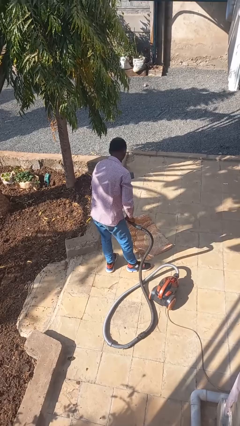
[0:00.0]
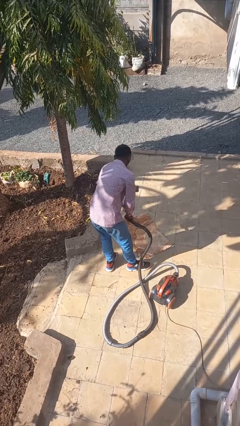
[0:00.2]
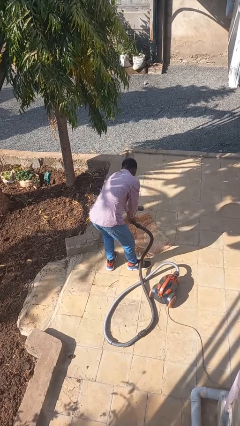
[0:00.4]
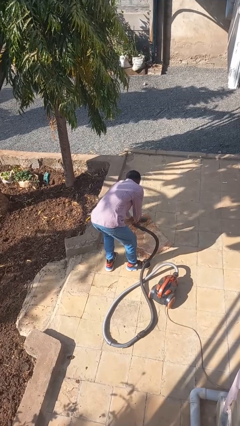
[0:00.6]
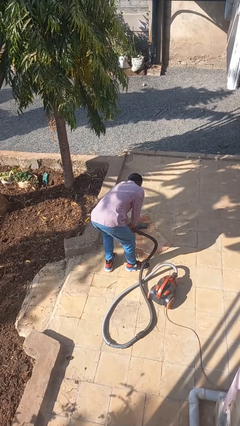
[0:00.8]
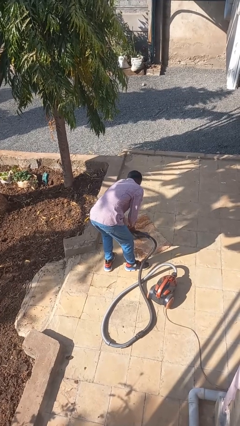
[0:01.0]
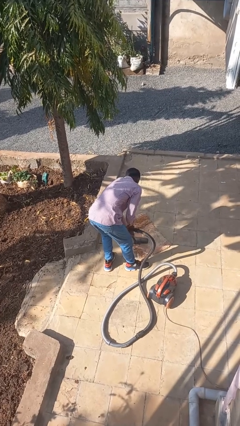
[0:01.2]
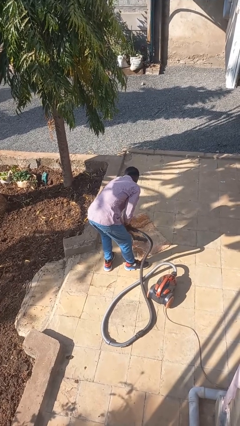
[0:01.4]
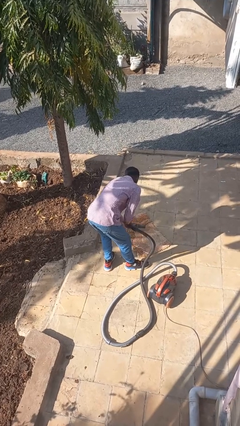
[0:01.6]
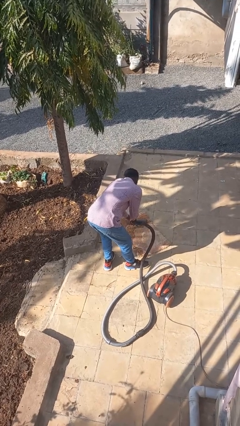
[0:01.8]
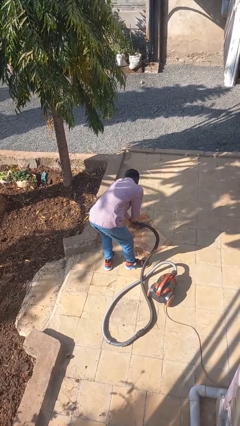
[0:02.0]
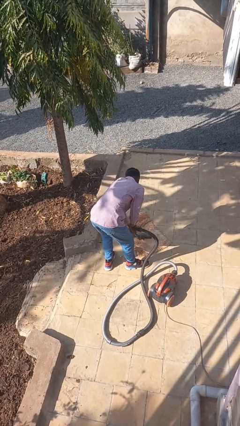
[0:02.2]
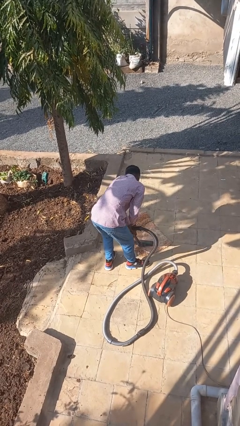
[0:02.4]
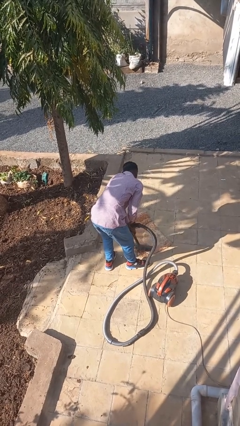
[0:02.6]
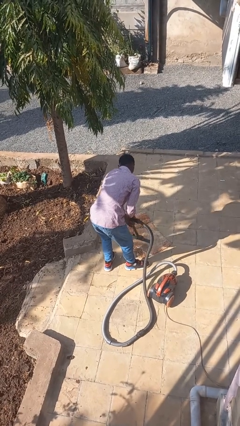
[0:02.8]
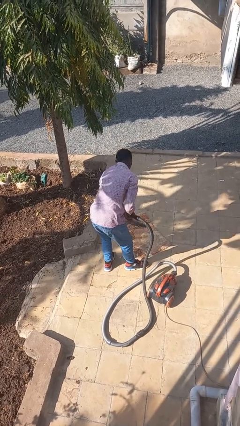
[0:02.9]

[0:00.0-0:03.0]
person vacuums carpet

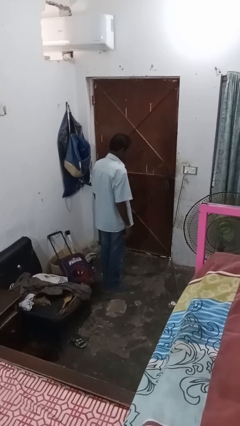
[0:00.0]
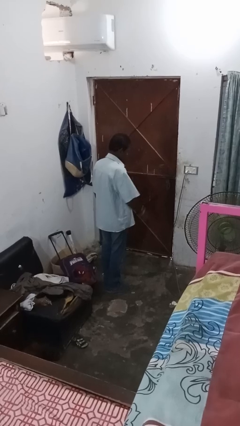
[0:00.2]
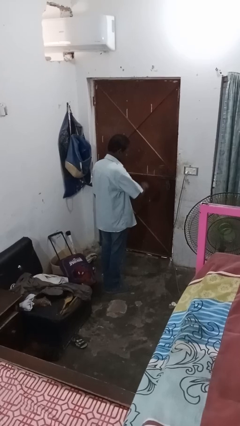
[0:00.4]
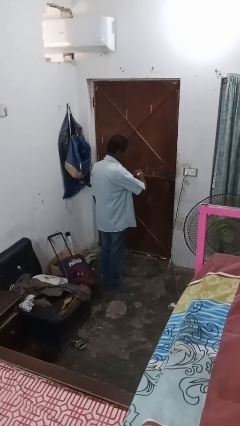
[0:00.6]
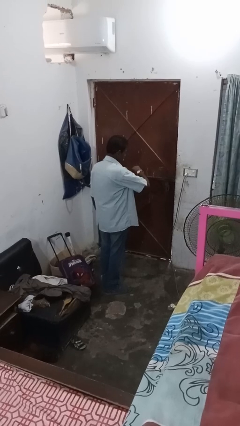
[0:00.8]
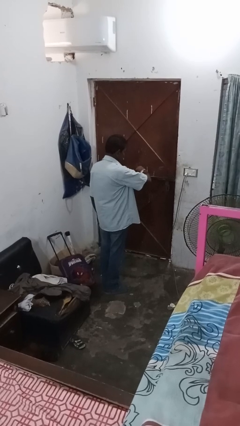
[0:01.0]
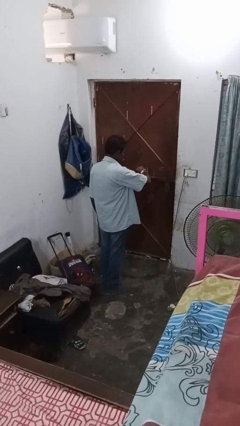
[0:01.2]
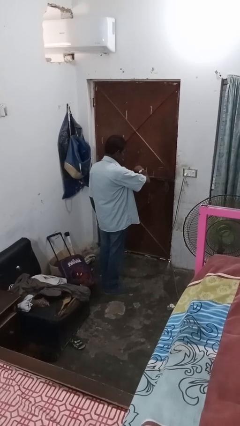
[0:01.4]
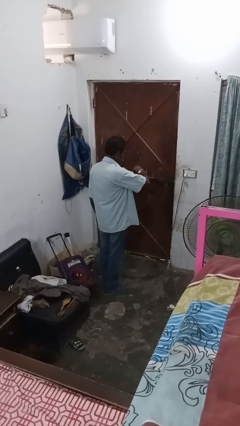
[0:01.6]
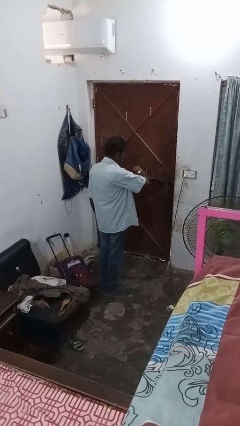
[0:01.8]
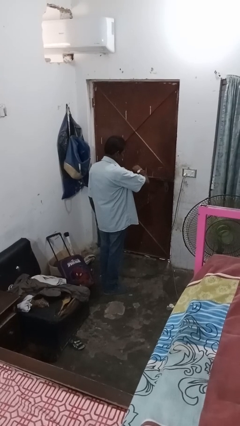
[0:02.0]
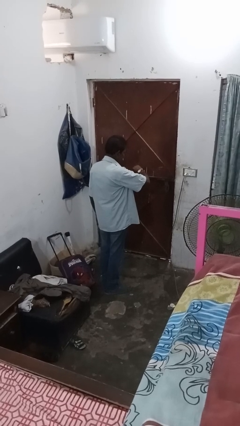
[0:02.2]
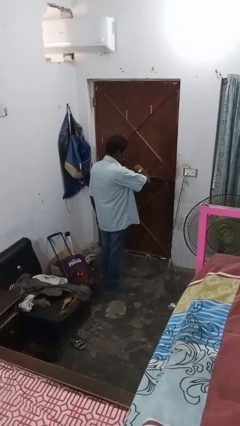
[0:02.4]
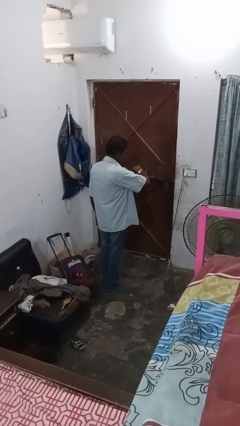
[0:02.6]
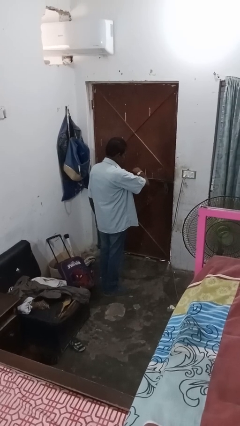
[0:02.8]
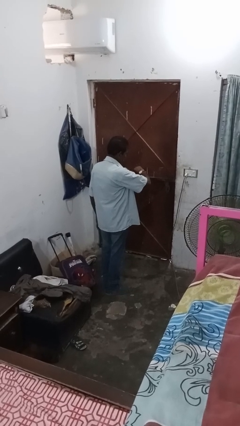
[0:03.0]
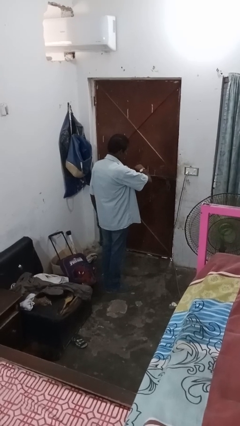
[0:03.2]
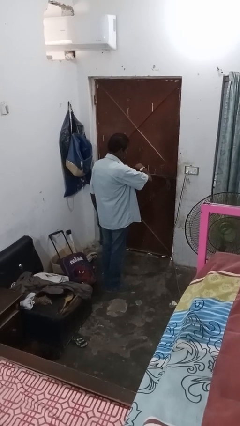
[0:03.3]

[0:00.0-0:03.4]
person puts on wristwatch

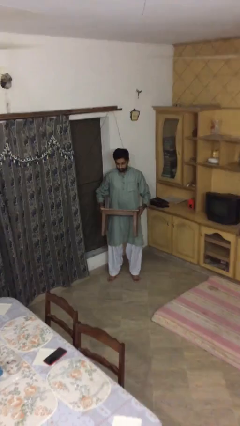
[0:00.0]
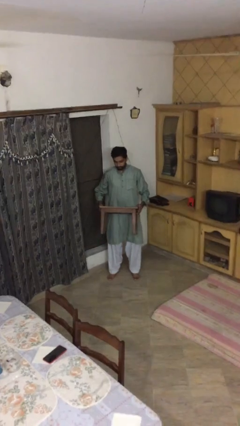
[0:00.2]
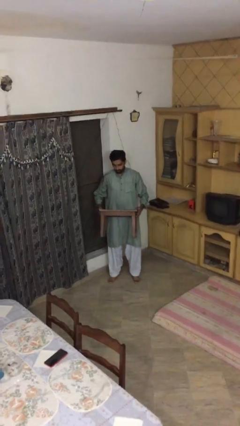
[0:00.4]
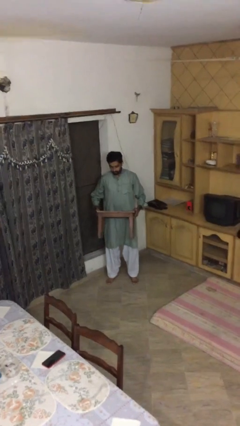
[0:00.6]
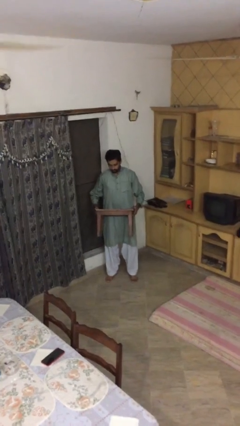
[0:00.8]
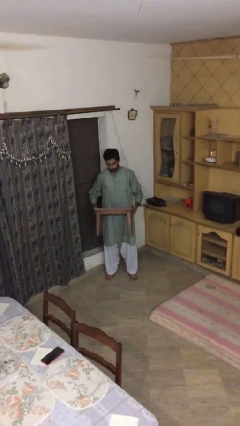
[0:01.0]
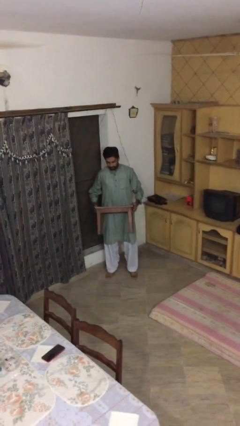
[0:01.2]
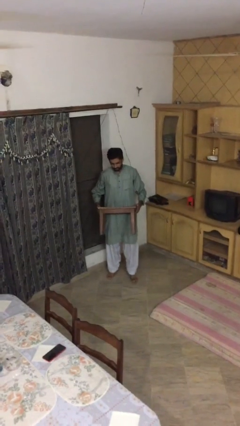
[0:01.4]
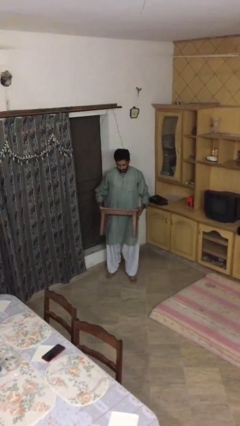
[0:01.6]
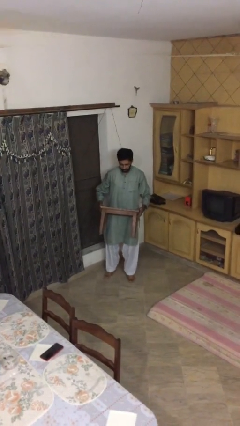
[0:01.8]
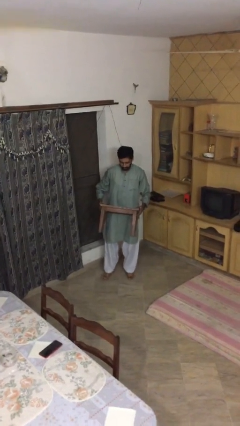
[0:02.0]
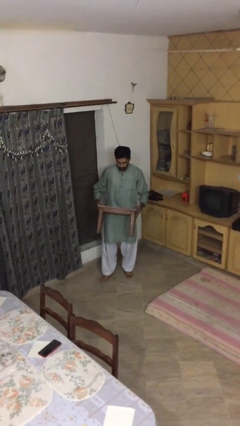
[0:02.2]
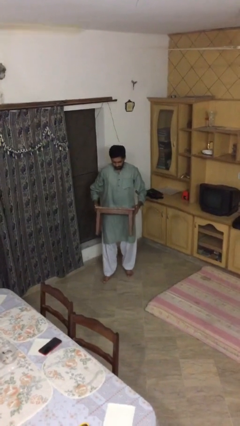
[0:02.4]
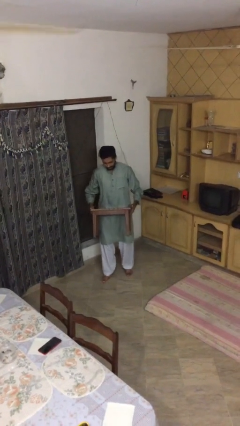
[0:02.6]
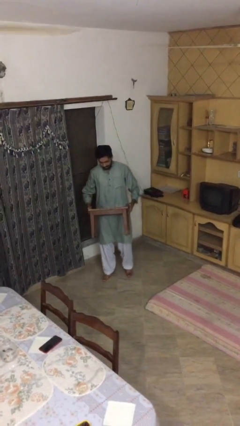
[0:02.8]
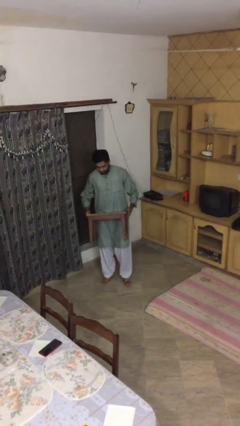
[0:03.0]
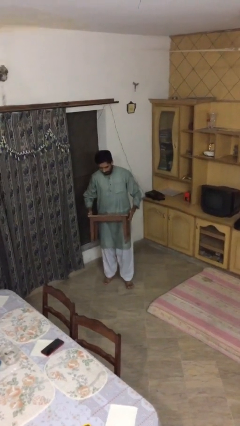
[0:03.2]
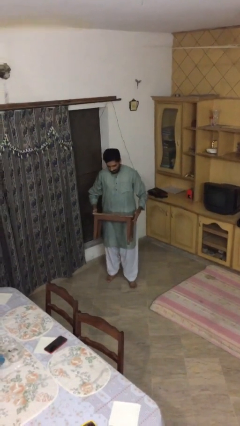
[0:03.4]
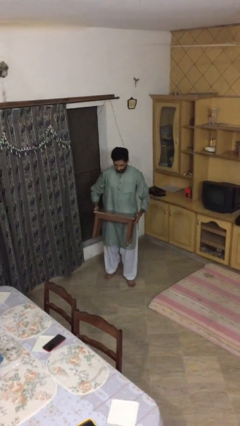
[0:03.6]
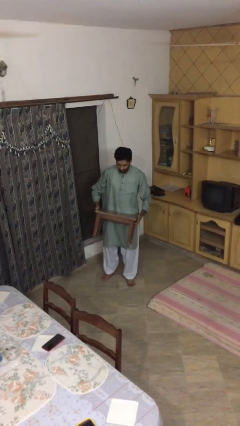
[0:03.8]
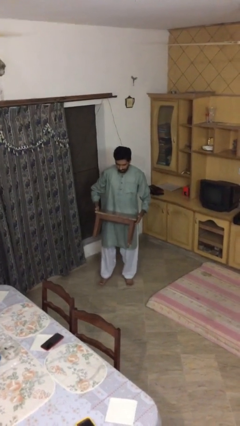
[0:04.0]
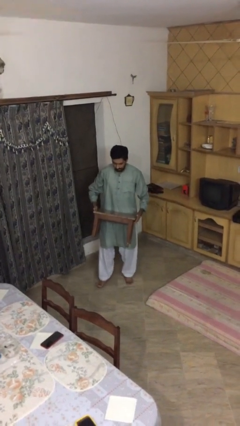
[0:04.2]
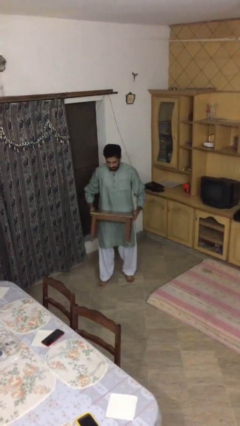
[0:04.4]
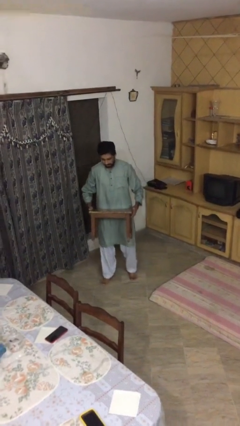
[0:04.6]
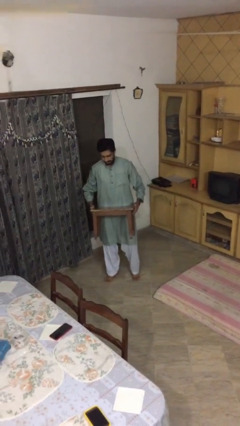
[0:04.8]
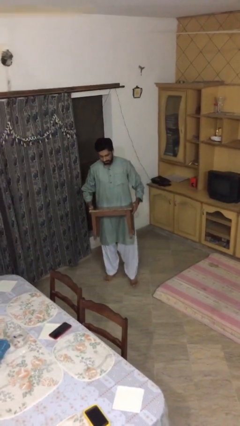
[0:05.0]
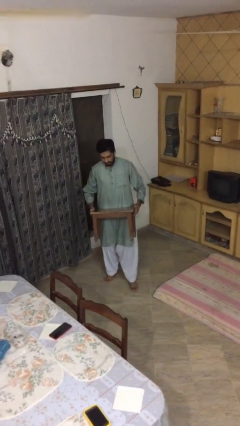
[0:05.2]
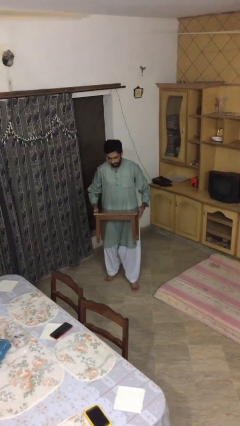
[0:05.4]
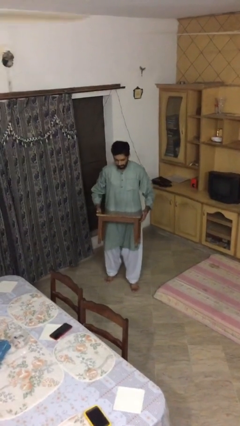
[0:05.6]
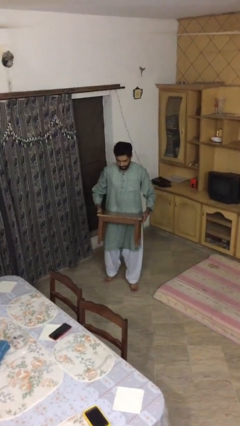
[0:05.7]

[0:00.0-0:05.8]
person carries heavy object

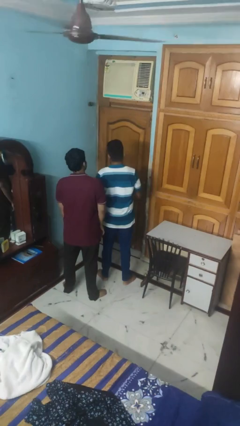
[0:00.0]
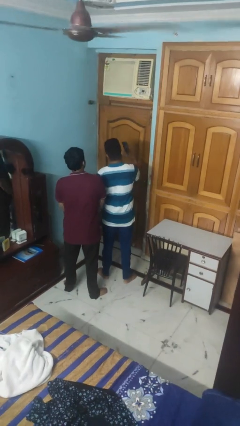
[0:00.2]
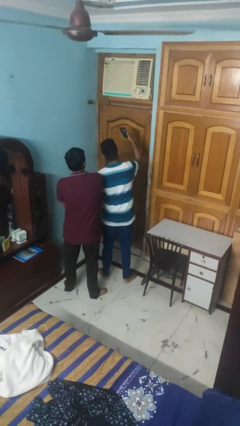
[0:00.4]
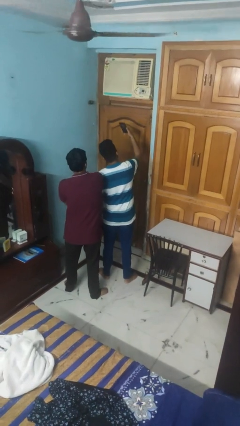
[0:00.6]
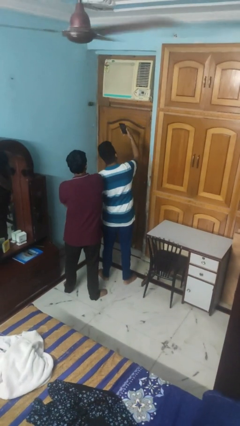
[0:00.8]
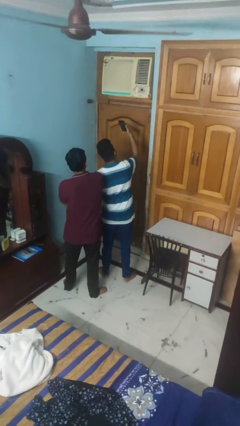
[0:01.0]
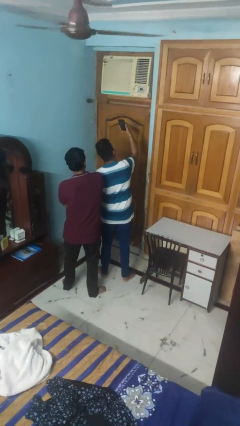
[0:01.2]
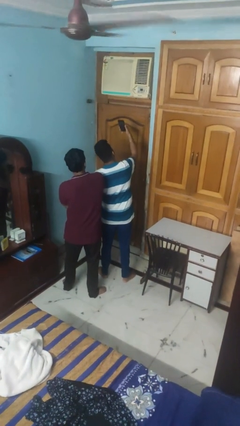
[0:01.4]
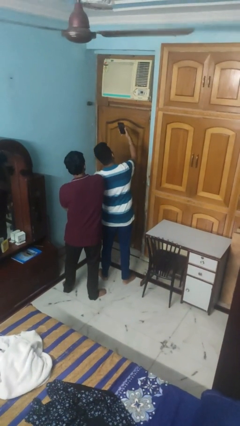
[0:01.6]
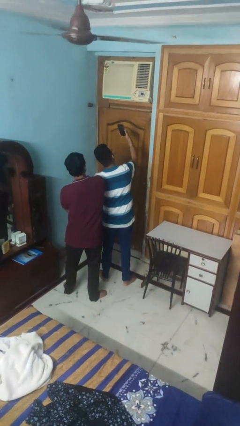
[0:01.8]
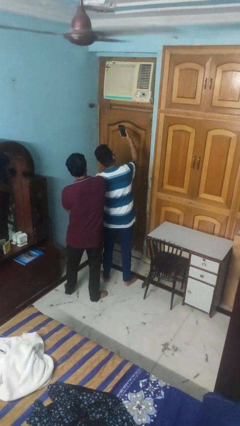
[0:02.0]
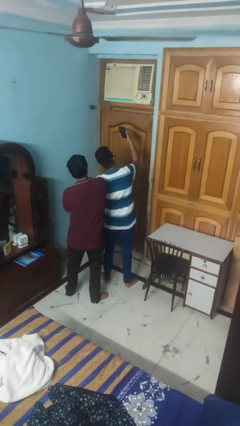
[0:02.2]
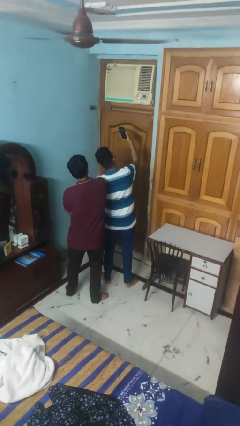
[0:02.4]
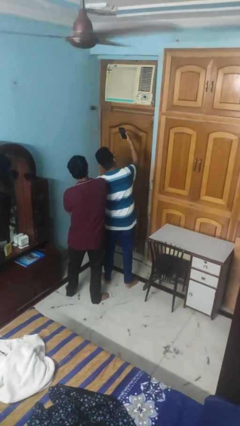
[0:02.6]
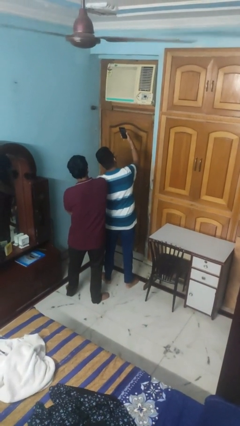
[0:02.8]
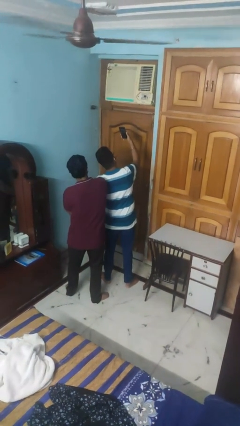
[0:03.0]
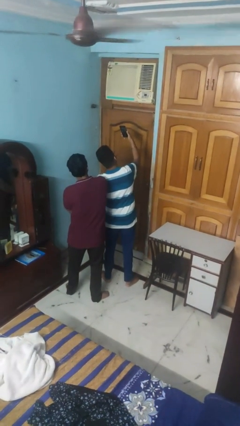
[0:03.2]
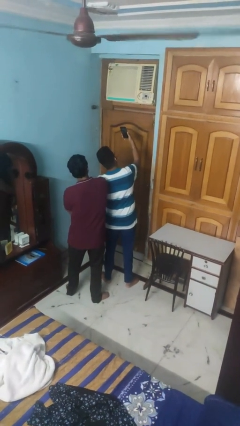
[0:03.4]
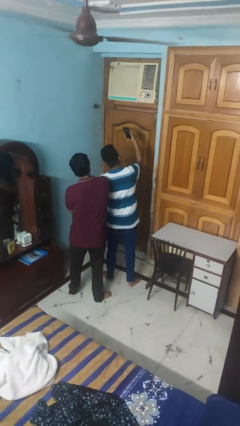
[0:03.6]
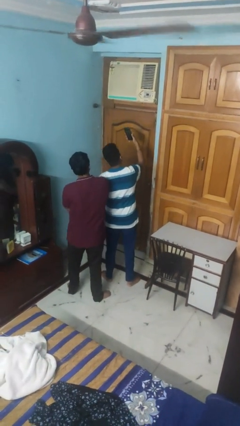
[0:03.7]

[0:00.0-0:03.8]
person takes selfie with person

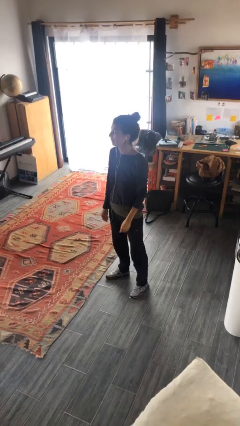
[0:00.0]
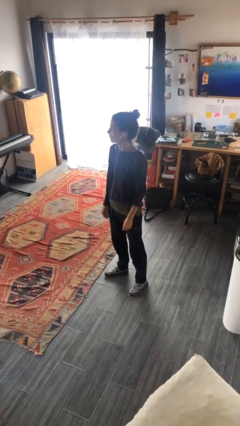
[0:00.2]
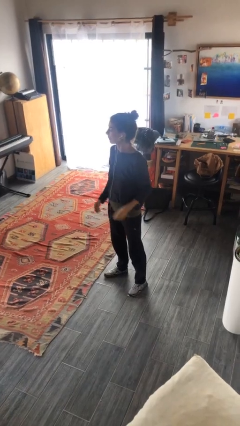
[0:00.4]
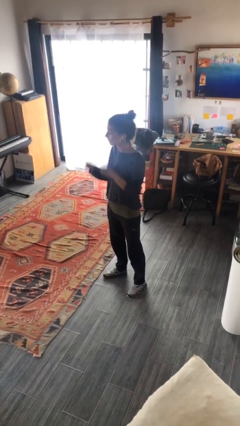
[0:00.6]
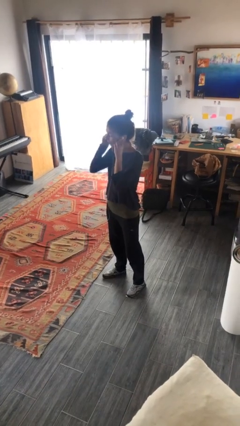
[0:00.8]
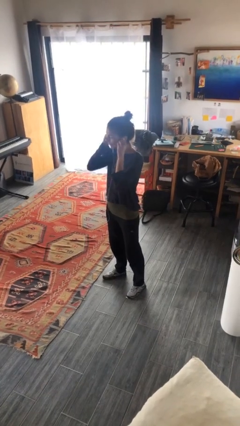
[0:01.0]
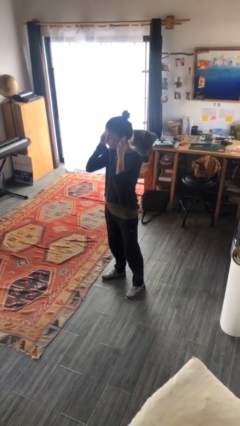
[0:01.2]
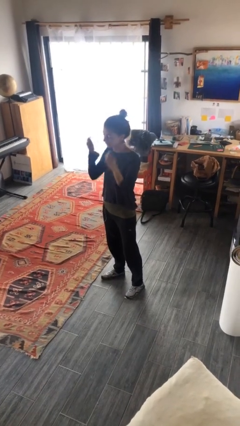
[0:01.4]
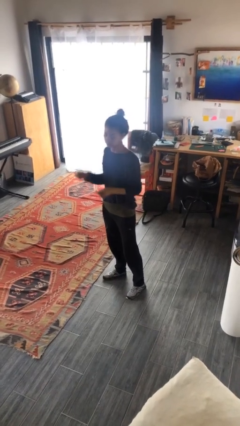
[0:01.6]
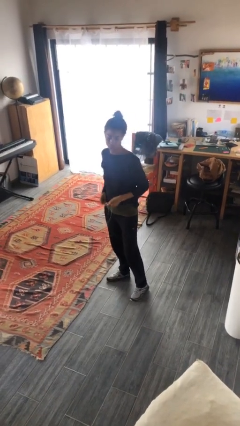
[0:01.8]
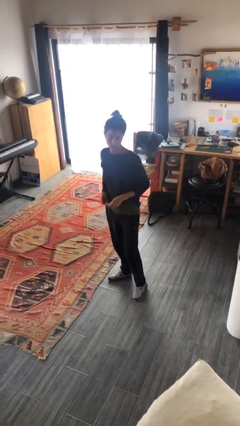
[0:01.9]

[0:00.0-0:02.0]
person takes off headphones
